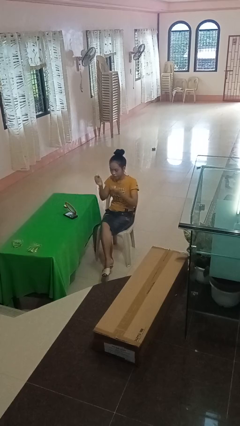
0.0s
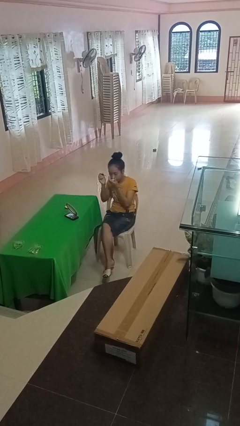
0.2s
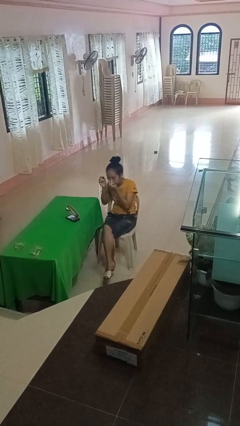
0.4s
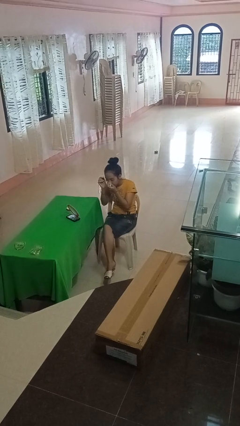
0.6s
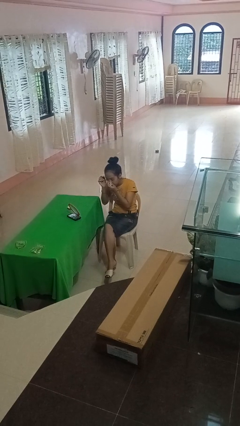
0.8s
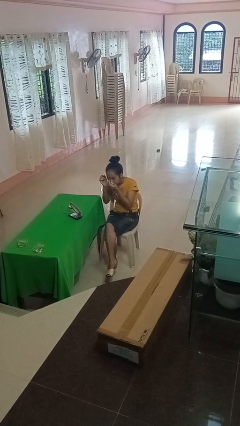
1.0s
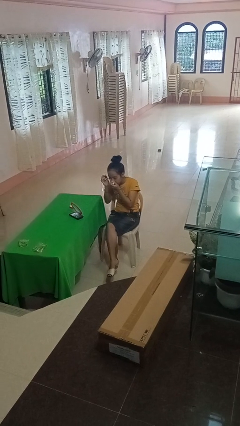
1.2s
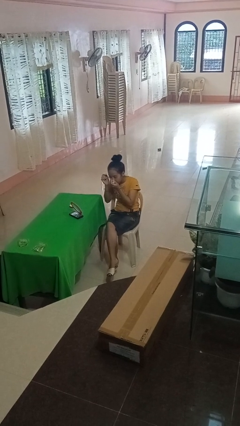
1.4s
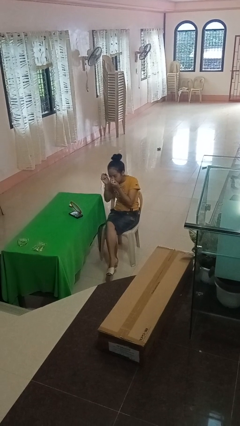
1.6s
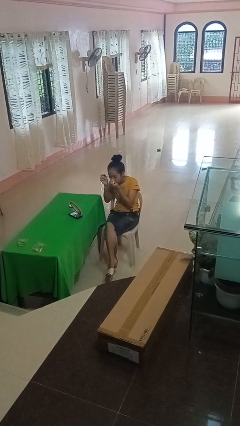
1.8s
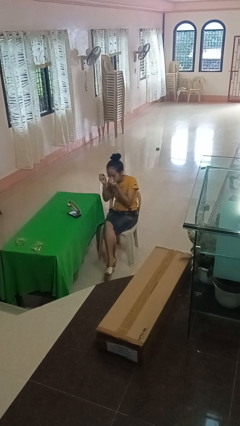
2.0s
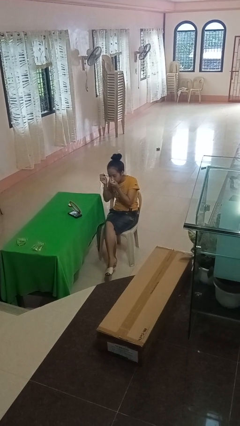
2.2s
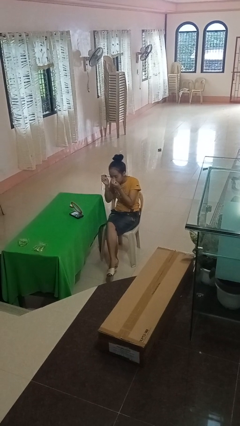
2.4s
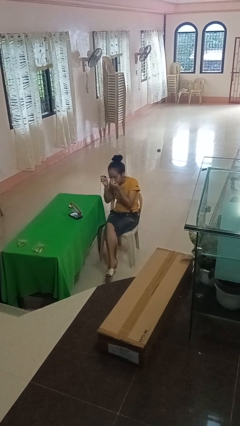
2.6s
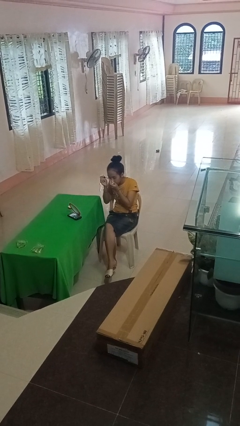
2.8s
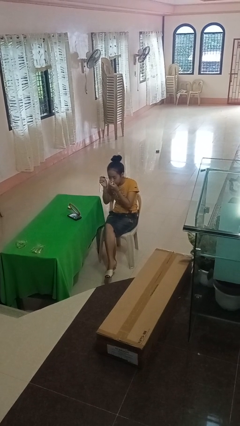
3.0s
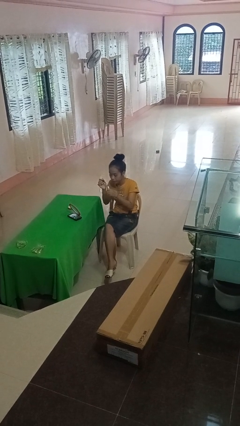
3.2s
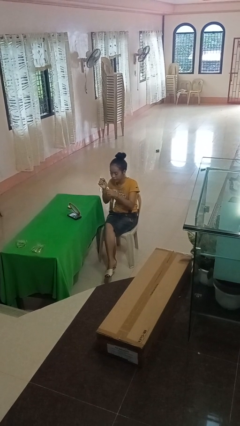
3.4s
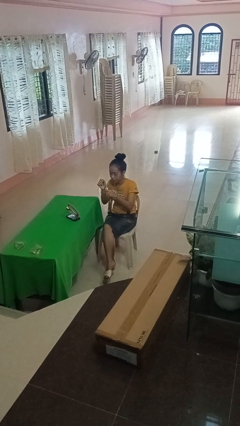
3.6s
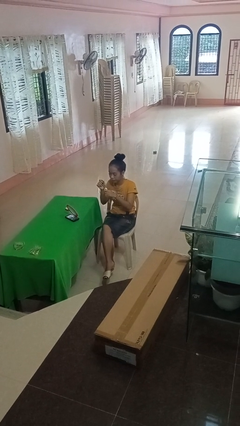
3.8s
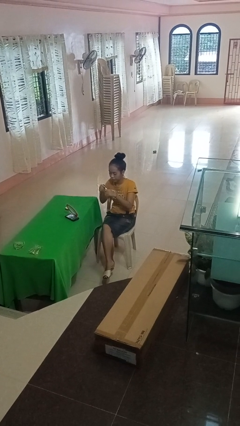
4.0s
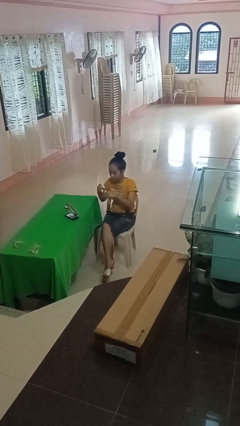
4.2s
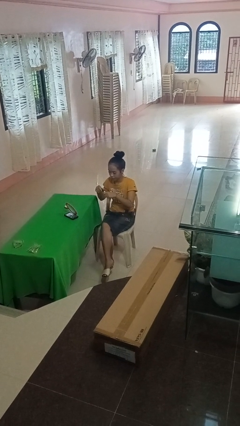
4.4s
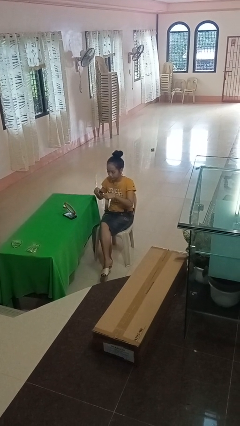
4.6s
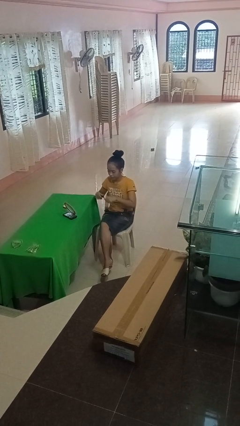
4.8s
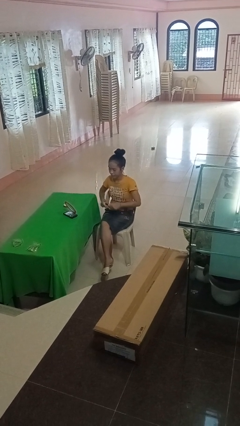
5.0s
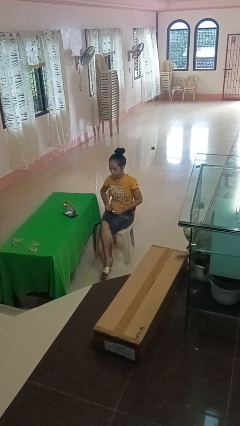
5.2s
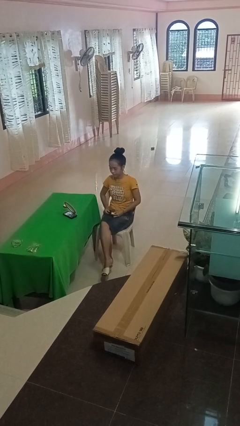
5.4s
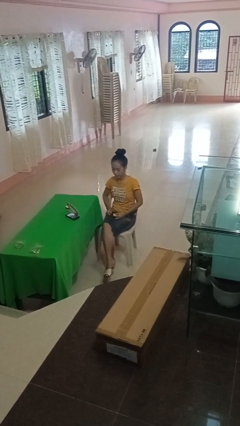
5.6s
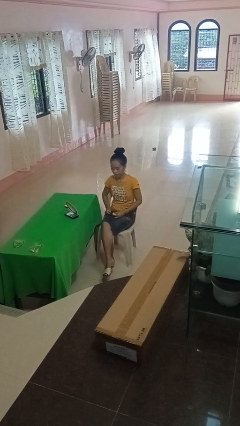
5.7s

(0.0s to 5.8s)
person applies eye makeup

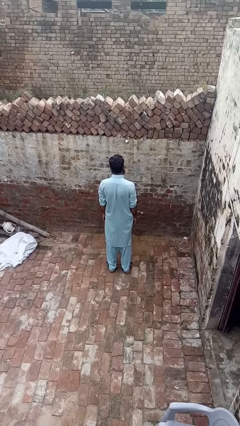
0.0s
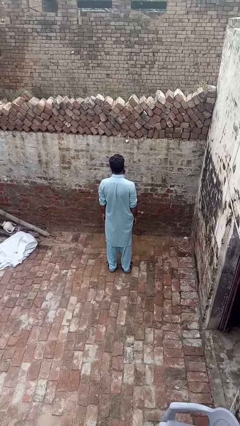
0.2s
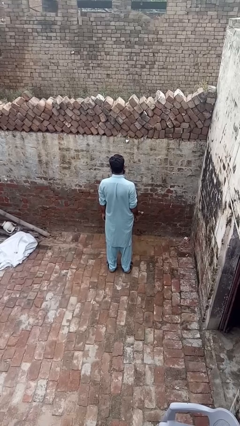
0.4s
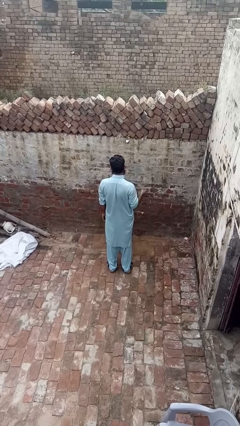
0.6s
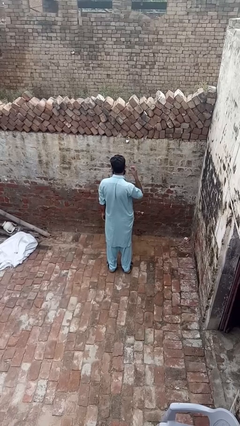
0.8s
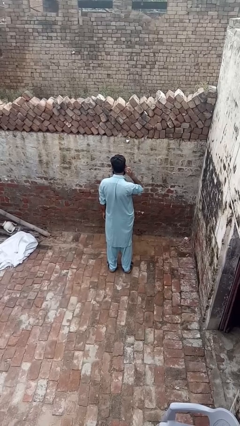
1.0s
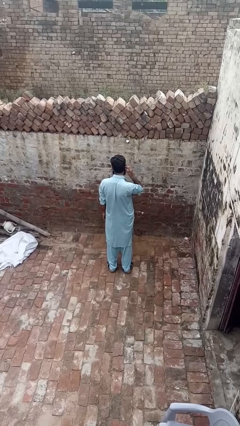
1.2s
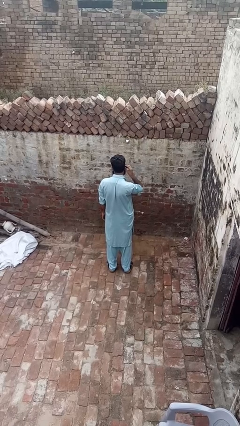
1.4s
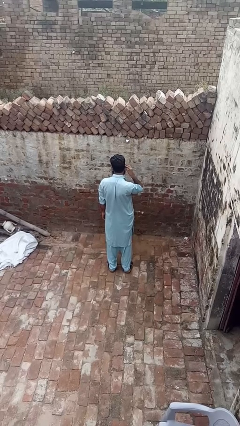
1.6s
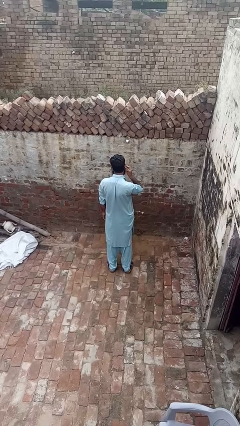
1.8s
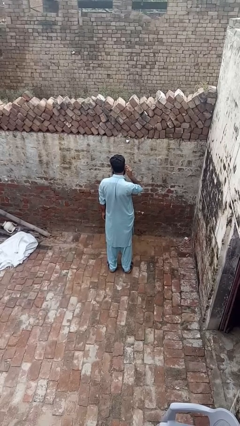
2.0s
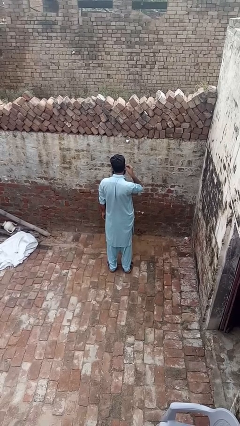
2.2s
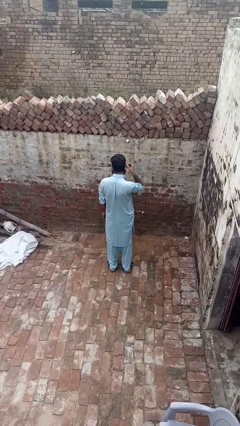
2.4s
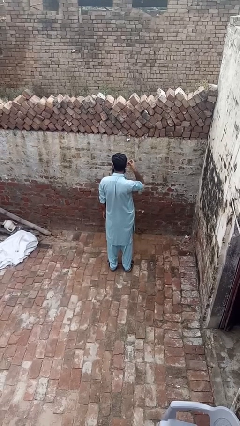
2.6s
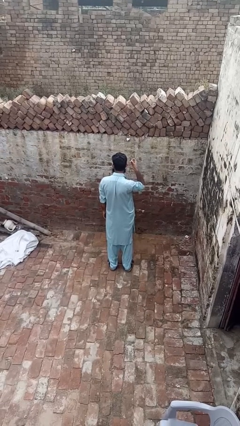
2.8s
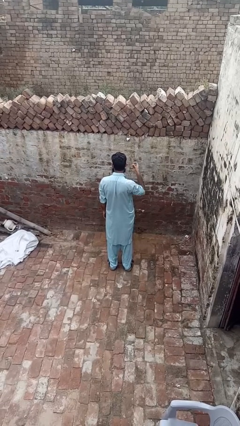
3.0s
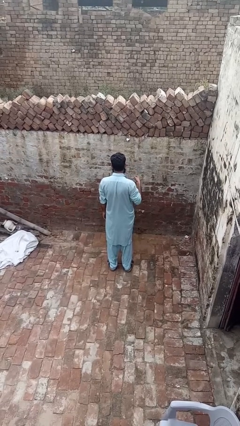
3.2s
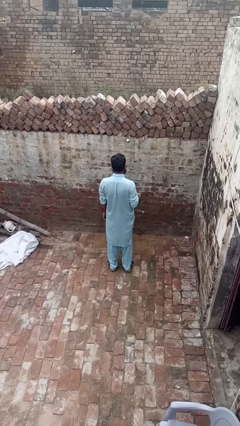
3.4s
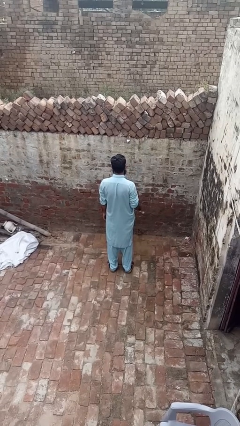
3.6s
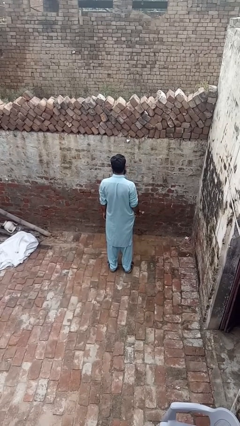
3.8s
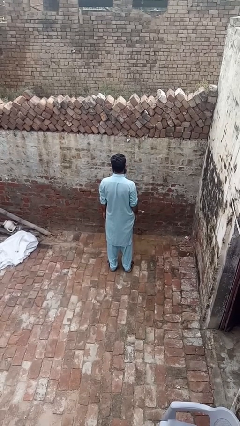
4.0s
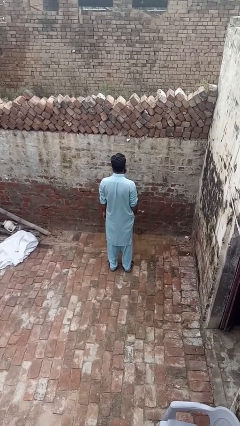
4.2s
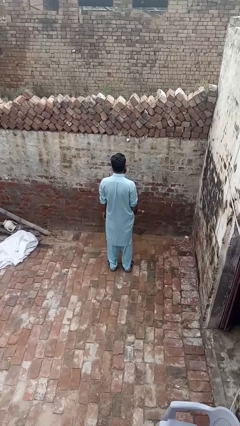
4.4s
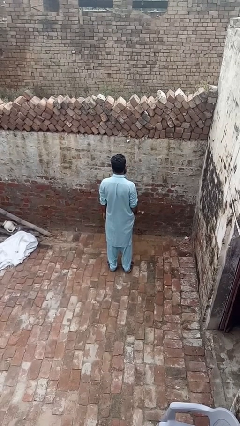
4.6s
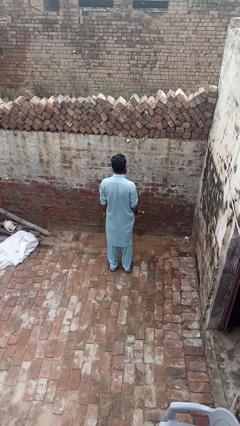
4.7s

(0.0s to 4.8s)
person takes off earrings

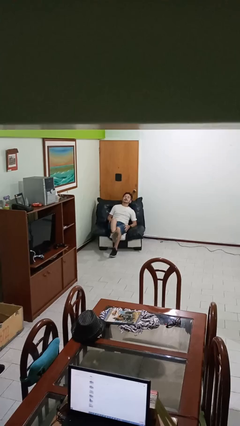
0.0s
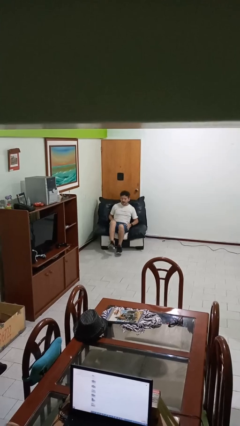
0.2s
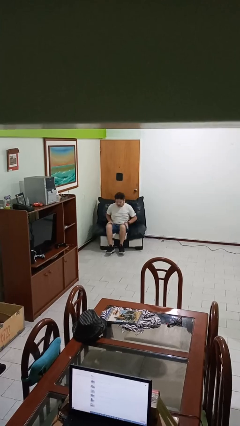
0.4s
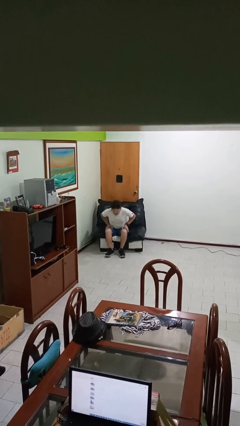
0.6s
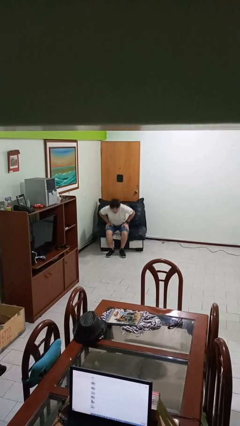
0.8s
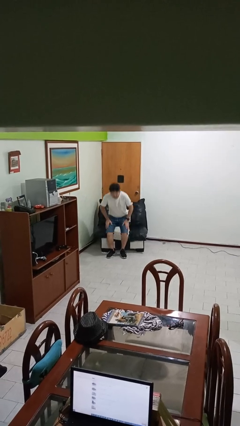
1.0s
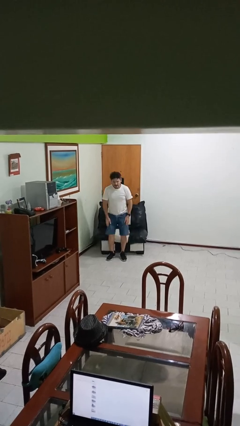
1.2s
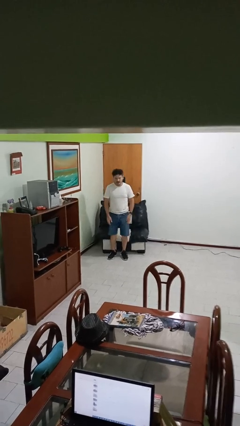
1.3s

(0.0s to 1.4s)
person stands up

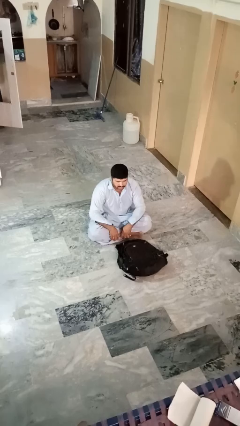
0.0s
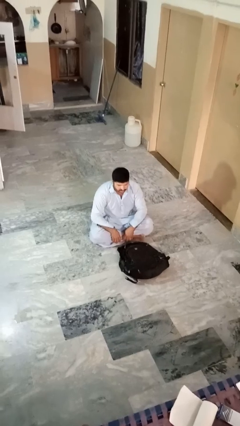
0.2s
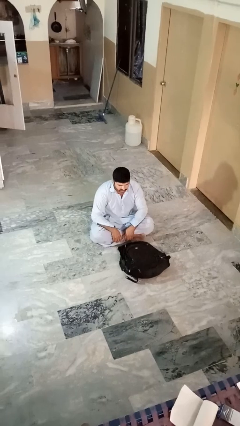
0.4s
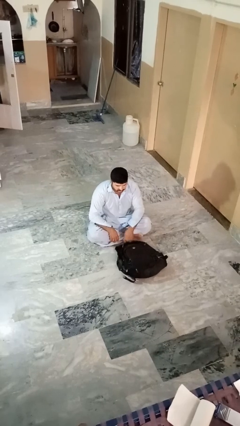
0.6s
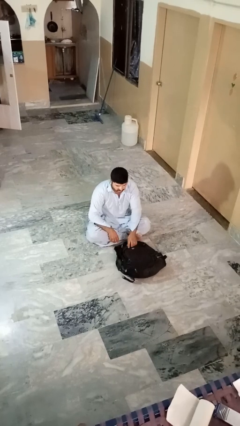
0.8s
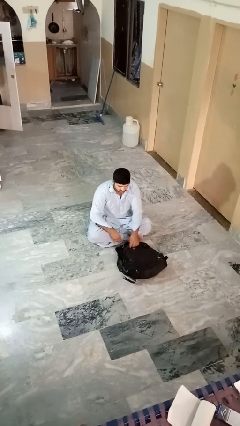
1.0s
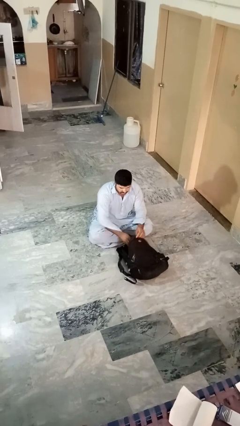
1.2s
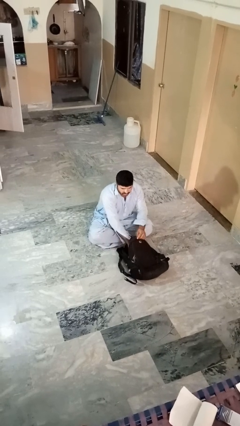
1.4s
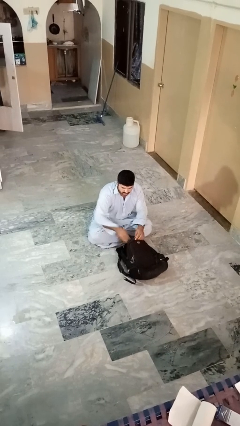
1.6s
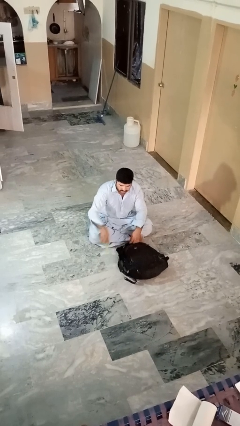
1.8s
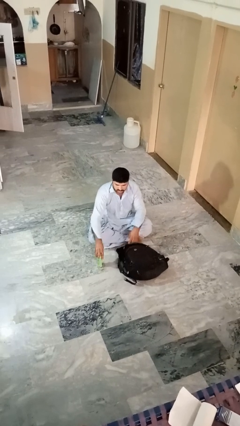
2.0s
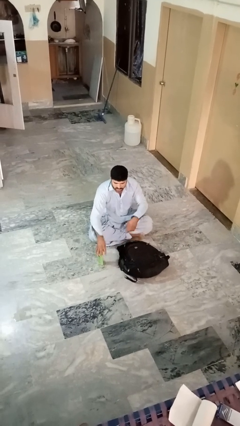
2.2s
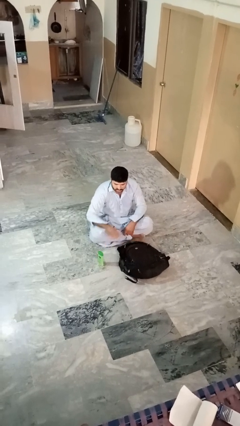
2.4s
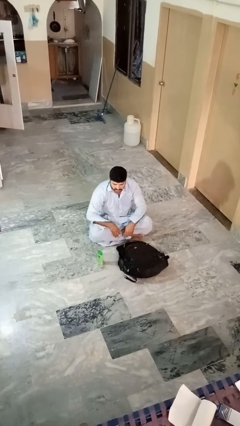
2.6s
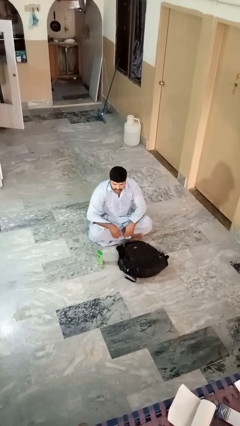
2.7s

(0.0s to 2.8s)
person takes object from bag

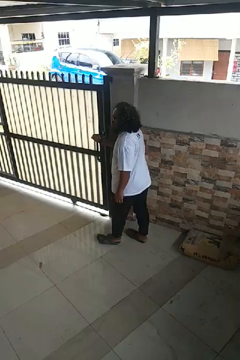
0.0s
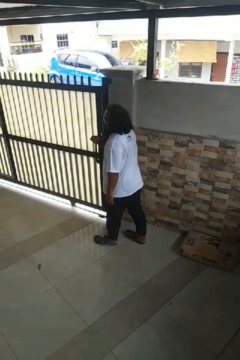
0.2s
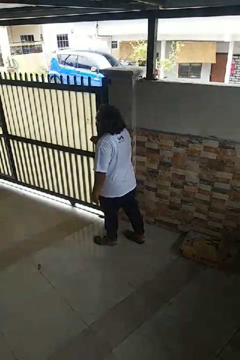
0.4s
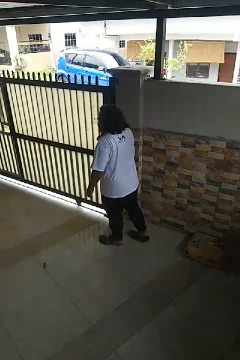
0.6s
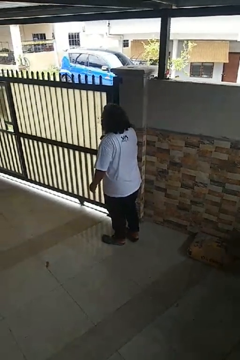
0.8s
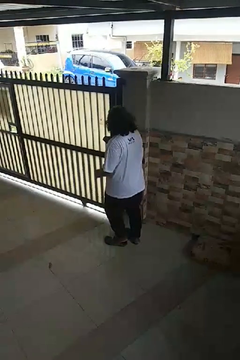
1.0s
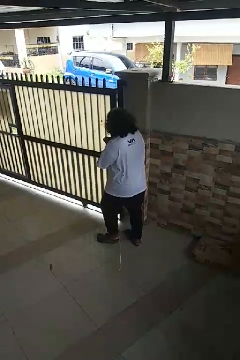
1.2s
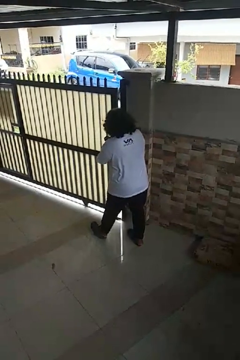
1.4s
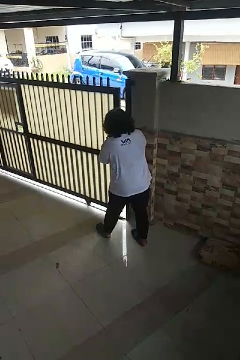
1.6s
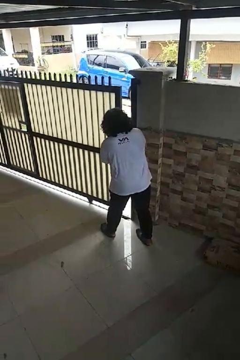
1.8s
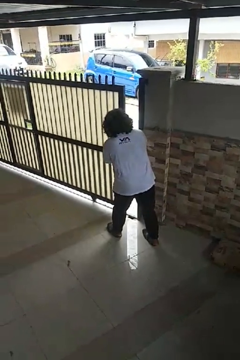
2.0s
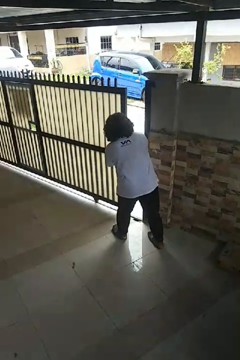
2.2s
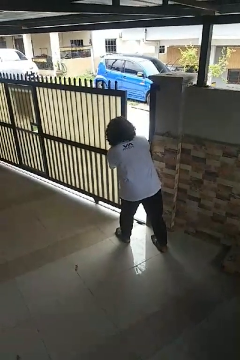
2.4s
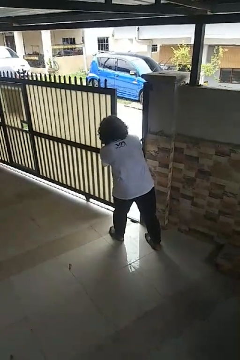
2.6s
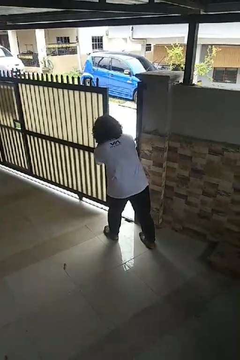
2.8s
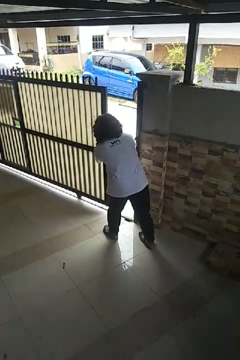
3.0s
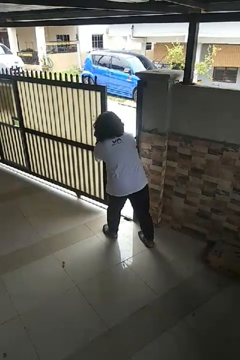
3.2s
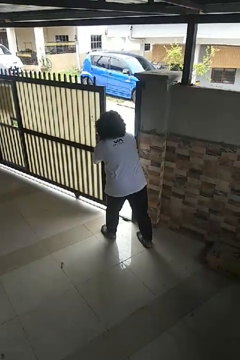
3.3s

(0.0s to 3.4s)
person opens sliding door
